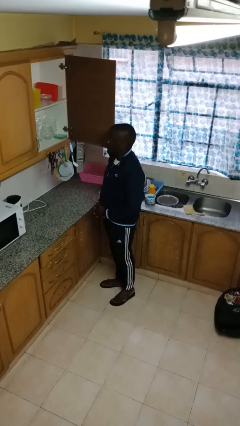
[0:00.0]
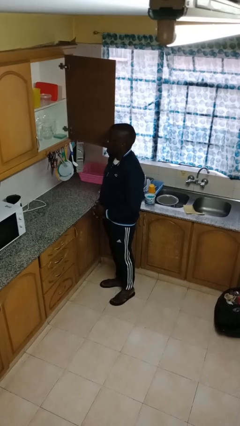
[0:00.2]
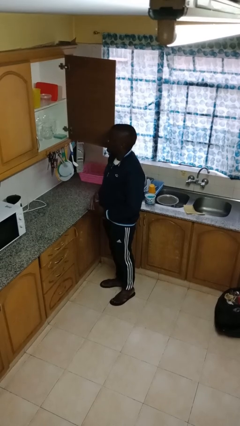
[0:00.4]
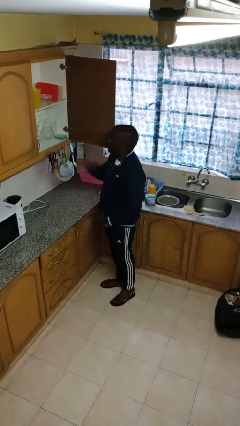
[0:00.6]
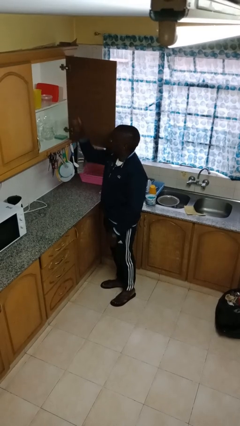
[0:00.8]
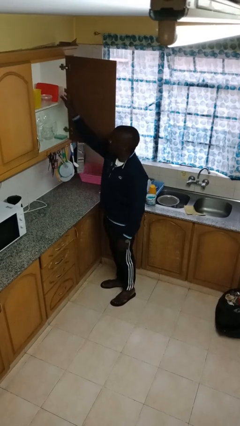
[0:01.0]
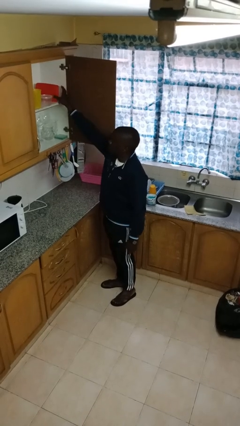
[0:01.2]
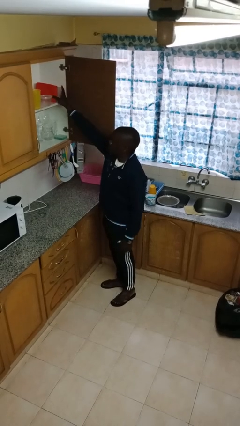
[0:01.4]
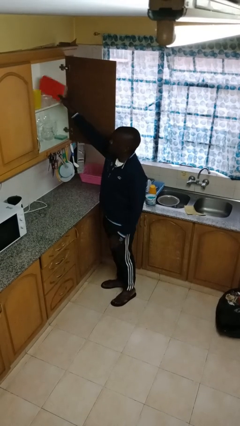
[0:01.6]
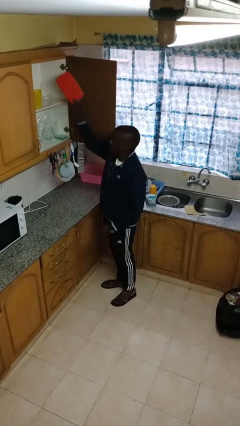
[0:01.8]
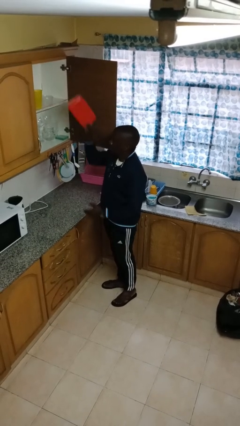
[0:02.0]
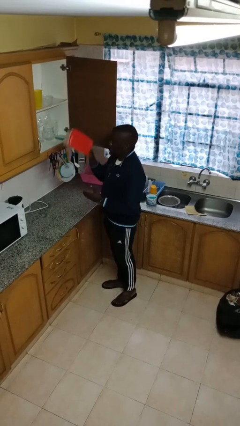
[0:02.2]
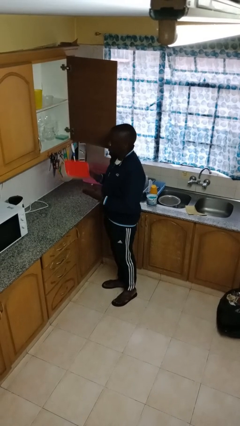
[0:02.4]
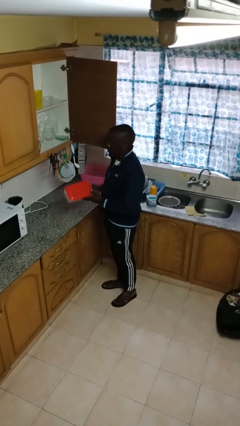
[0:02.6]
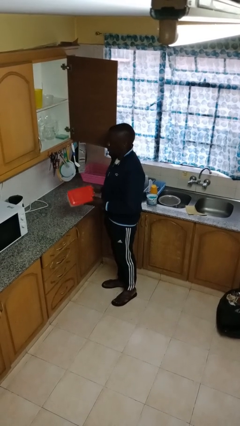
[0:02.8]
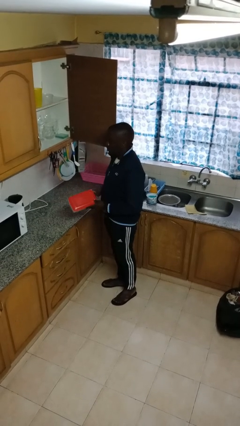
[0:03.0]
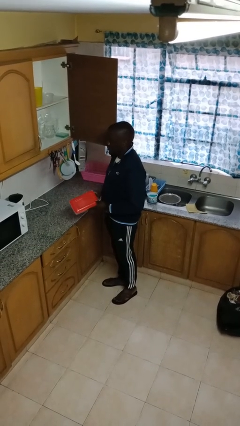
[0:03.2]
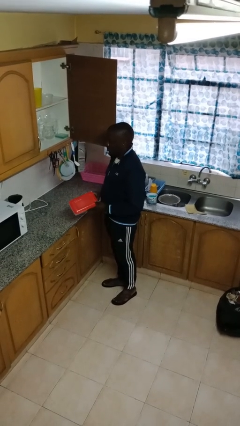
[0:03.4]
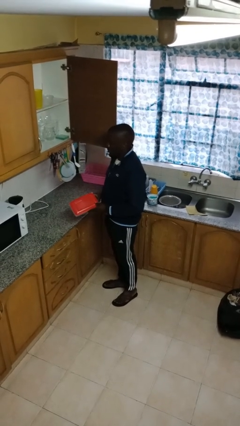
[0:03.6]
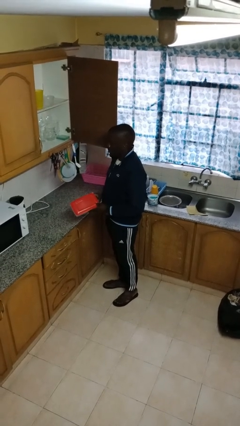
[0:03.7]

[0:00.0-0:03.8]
person picks up object from shelf

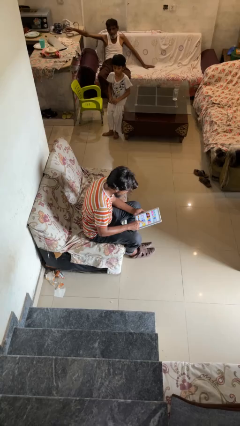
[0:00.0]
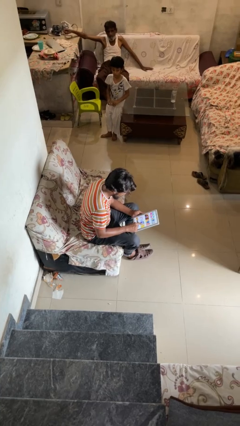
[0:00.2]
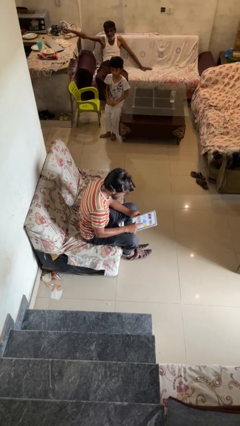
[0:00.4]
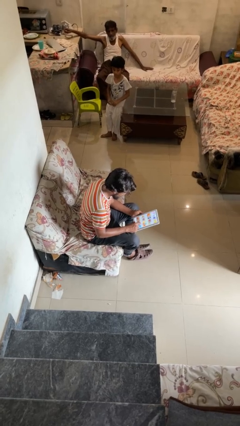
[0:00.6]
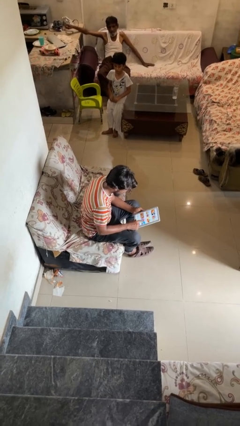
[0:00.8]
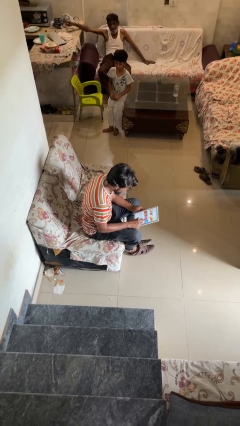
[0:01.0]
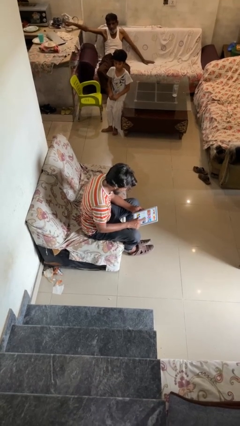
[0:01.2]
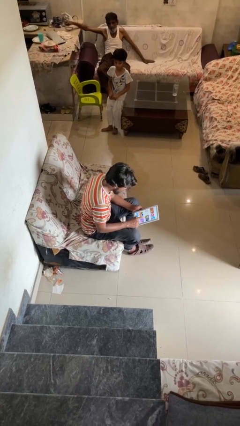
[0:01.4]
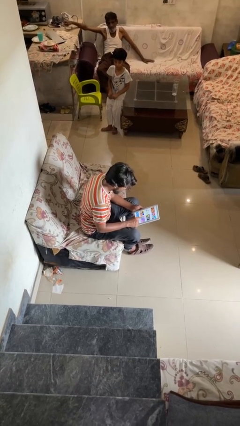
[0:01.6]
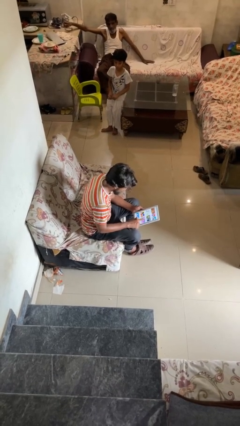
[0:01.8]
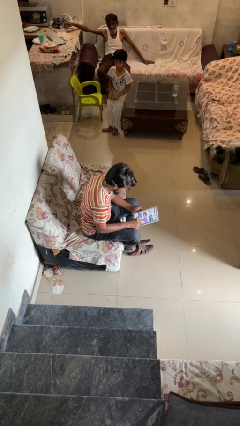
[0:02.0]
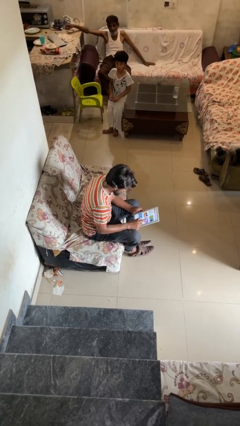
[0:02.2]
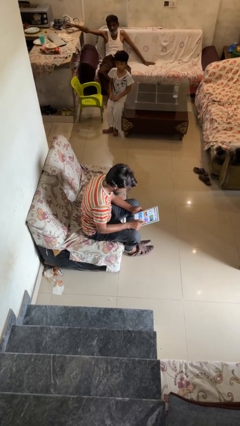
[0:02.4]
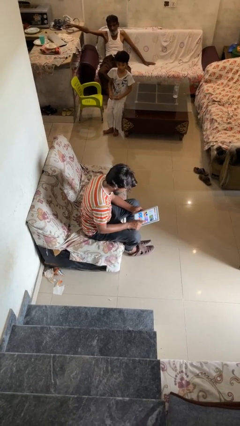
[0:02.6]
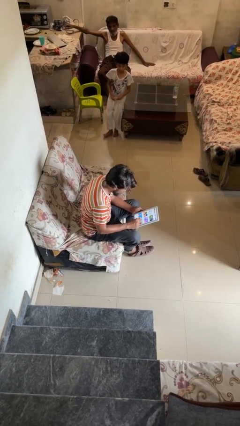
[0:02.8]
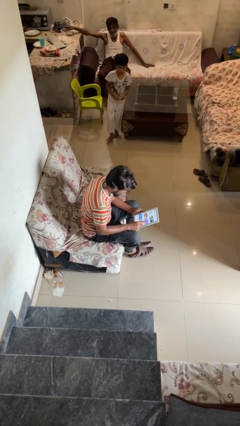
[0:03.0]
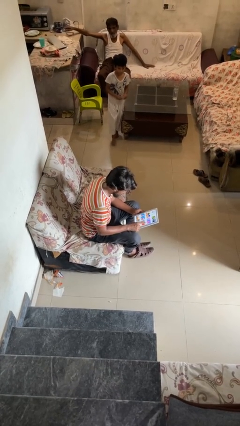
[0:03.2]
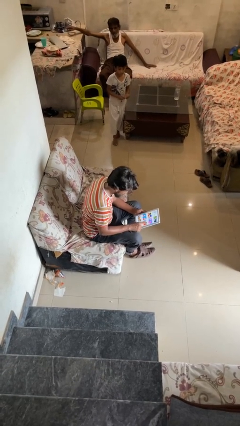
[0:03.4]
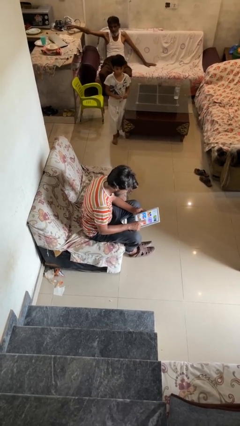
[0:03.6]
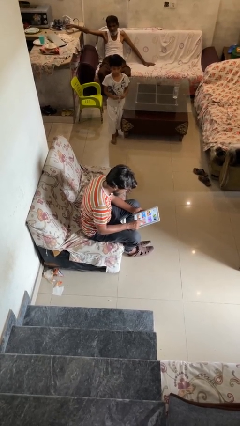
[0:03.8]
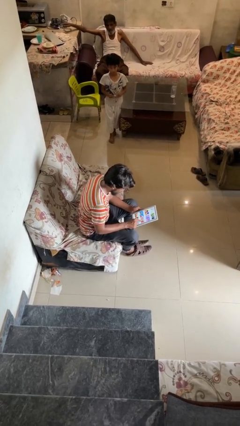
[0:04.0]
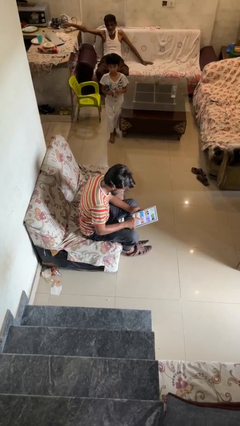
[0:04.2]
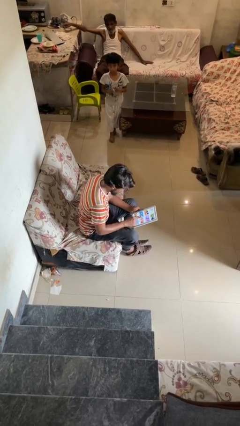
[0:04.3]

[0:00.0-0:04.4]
person interacts with tablet

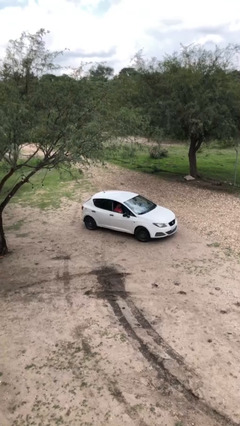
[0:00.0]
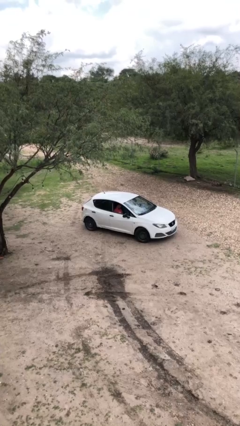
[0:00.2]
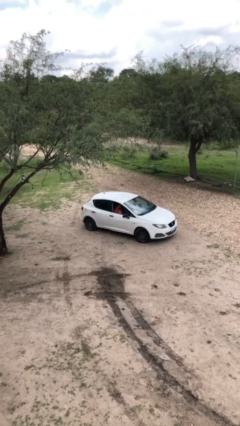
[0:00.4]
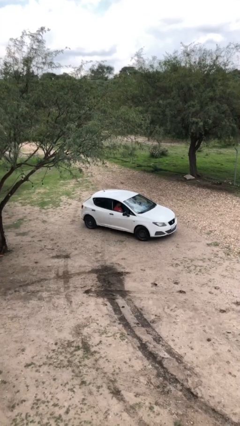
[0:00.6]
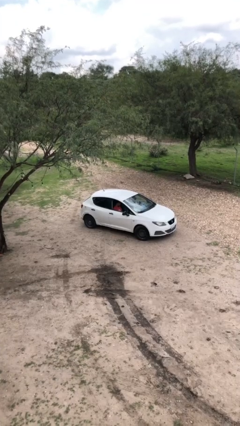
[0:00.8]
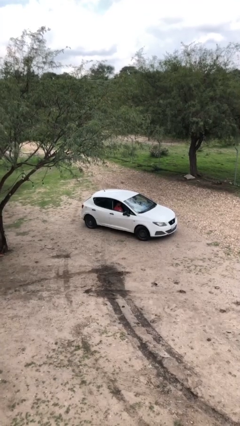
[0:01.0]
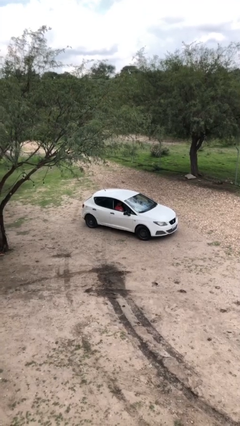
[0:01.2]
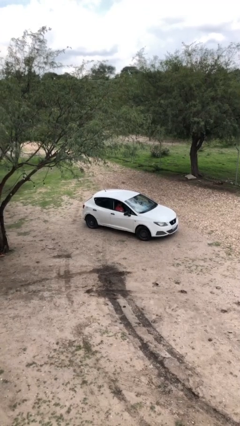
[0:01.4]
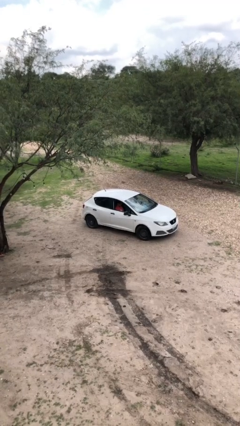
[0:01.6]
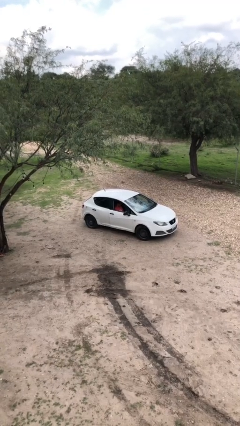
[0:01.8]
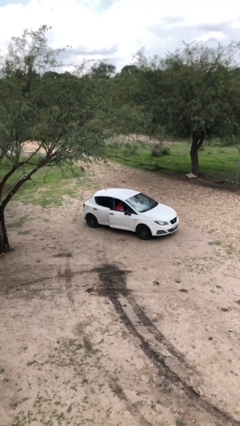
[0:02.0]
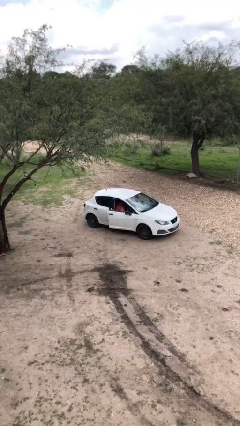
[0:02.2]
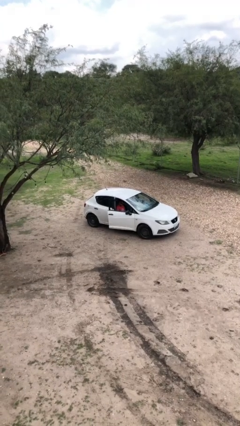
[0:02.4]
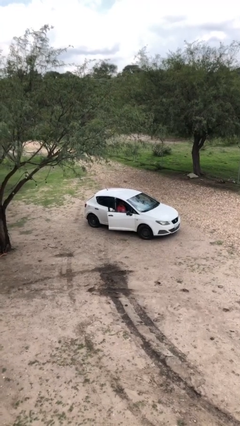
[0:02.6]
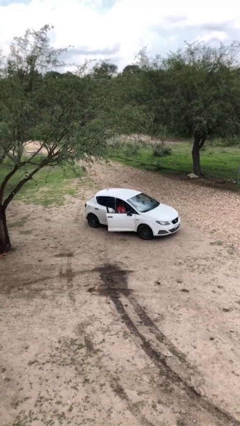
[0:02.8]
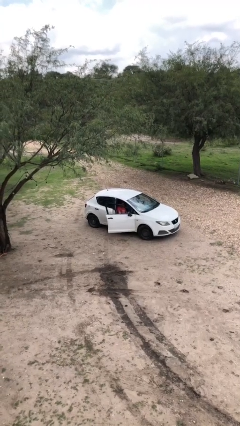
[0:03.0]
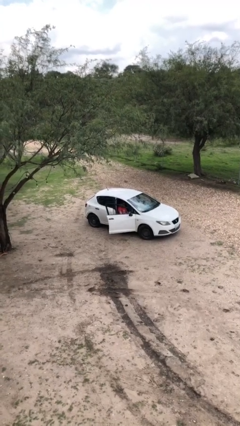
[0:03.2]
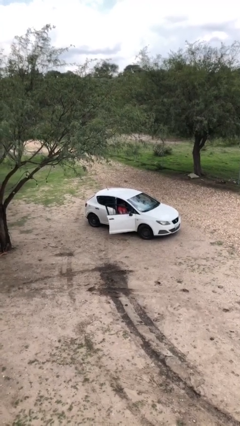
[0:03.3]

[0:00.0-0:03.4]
person opens car door

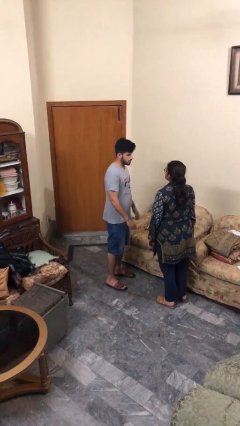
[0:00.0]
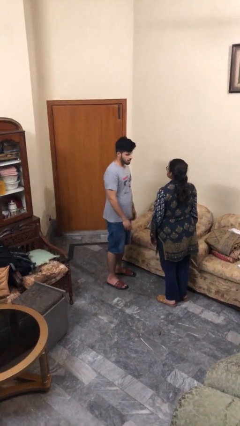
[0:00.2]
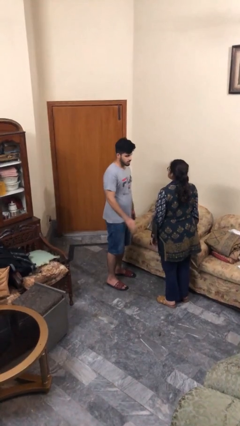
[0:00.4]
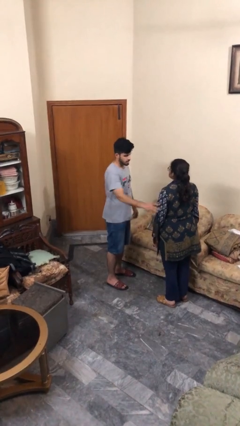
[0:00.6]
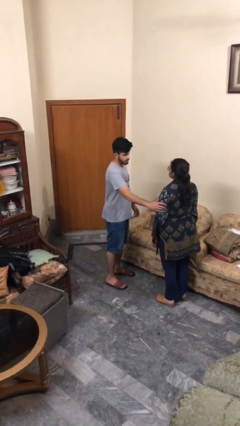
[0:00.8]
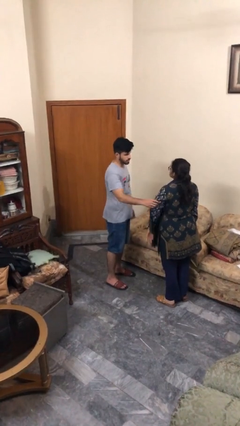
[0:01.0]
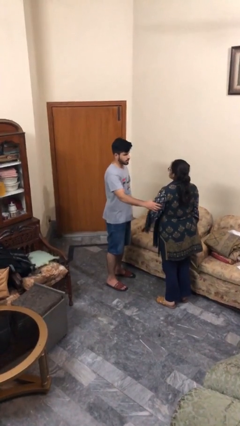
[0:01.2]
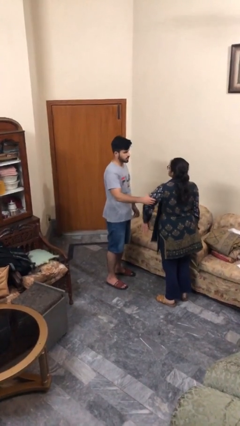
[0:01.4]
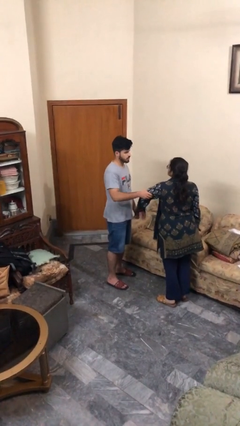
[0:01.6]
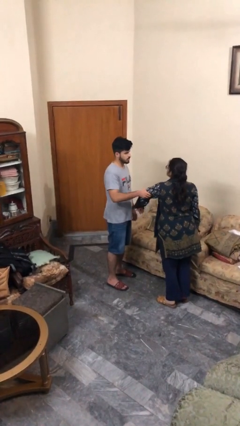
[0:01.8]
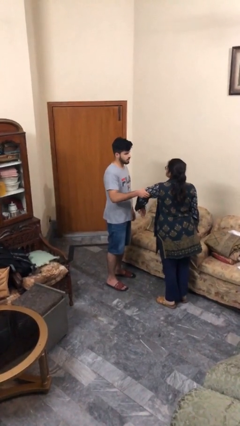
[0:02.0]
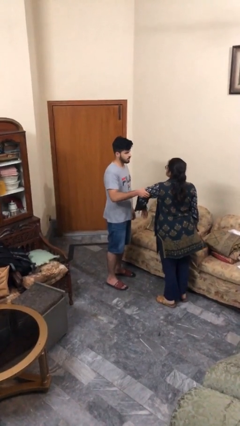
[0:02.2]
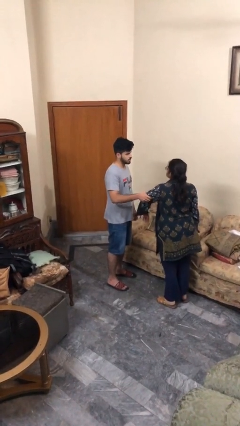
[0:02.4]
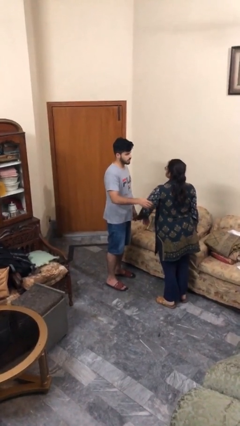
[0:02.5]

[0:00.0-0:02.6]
person grabs person by bicep

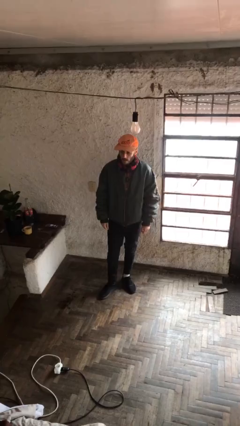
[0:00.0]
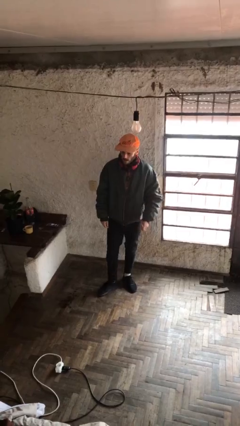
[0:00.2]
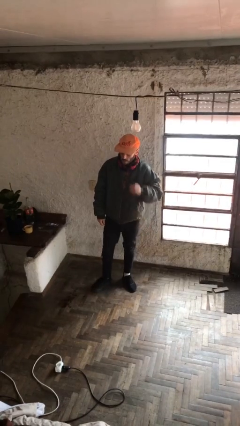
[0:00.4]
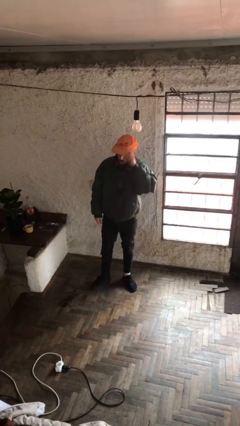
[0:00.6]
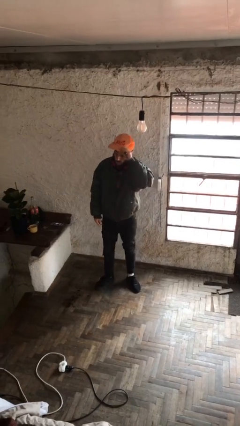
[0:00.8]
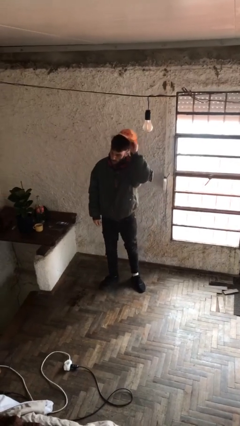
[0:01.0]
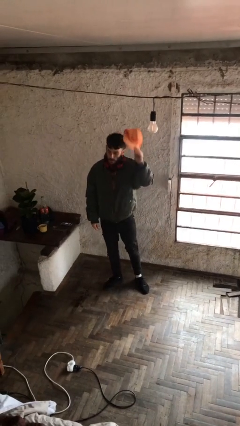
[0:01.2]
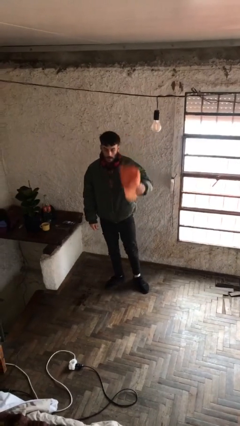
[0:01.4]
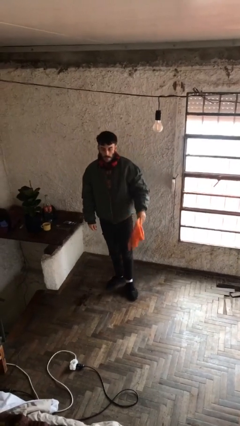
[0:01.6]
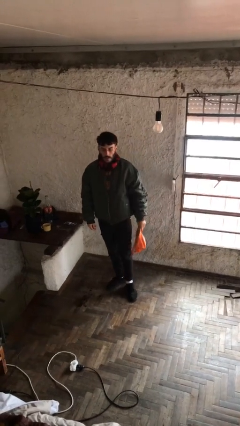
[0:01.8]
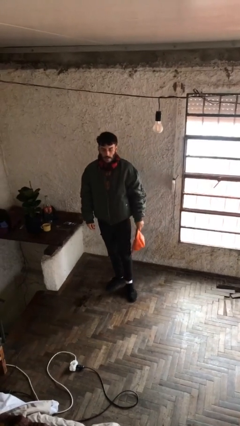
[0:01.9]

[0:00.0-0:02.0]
person takes off hat

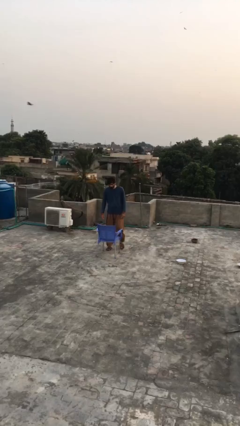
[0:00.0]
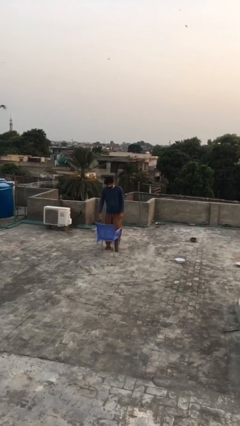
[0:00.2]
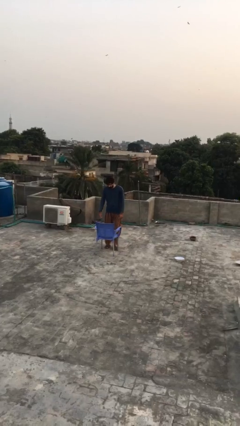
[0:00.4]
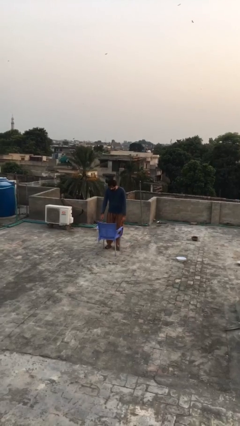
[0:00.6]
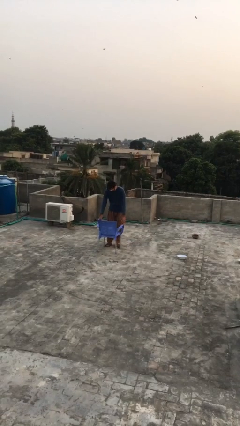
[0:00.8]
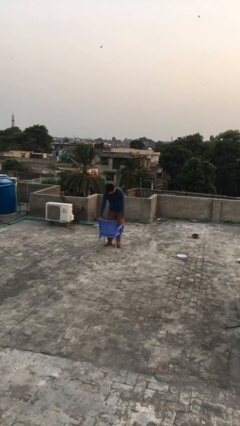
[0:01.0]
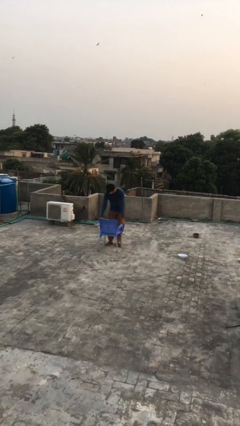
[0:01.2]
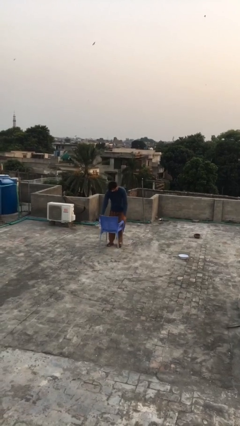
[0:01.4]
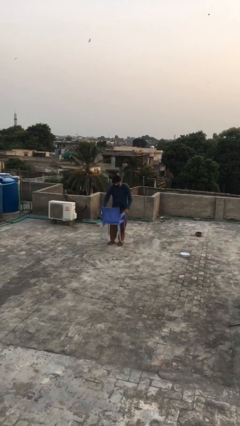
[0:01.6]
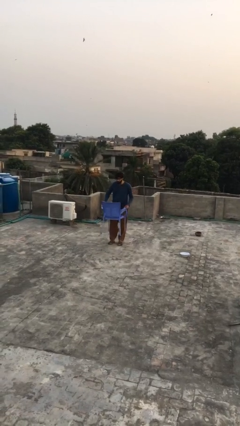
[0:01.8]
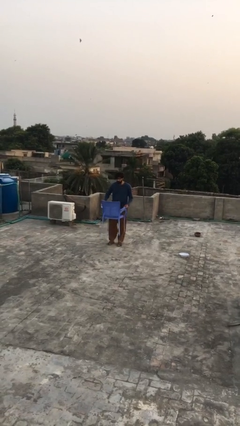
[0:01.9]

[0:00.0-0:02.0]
person picks up object from floor
